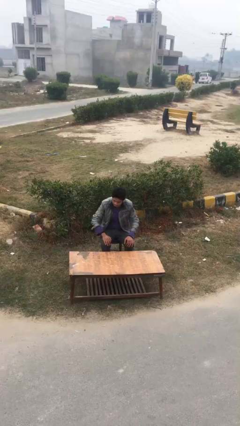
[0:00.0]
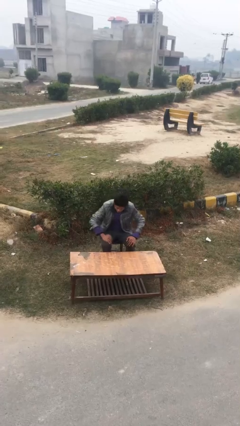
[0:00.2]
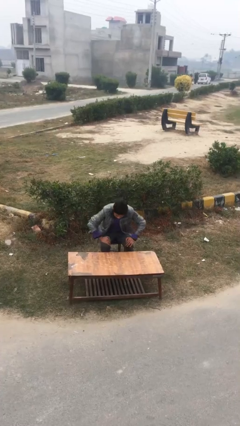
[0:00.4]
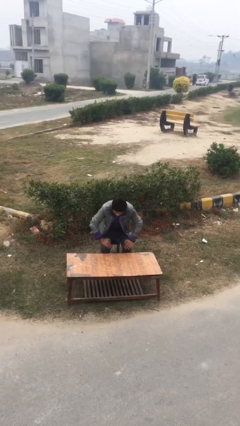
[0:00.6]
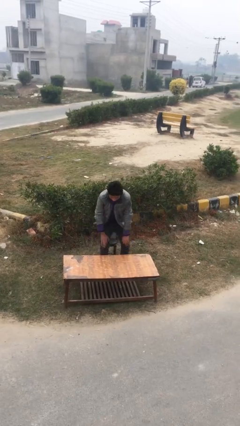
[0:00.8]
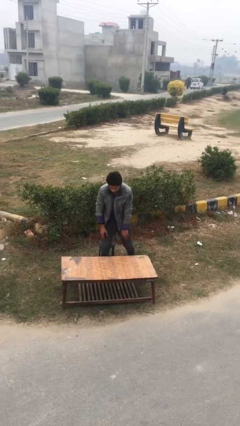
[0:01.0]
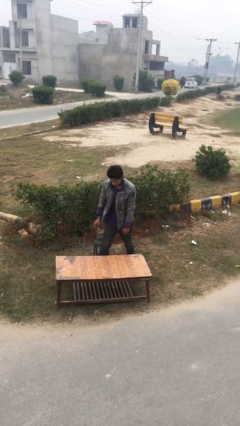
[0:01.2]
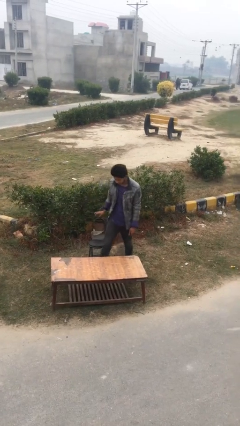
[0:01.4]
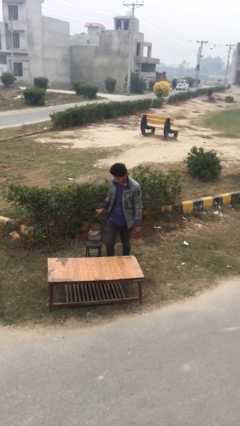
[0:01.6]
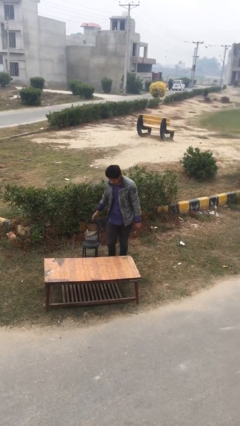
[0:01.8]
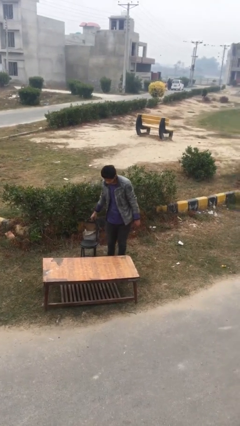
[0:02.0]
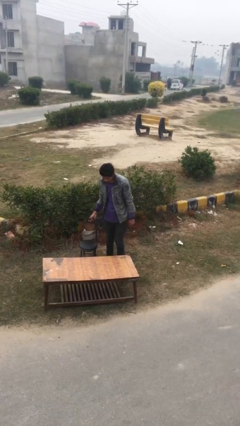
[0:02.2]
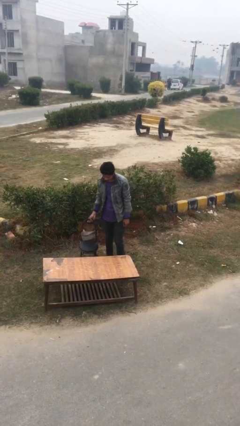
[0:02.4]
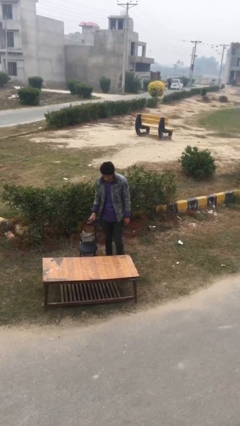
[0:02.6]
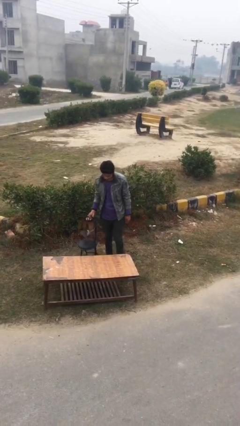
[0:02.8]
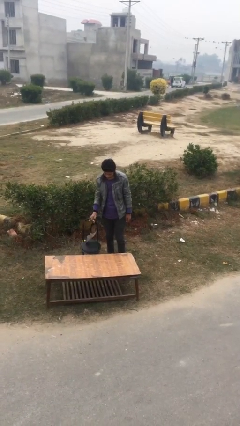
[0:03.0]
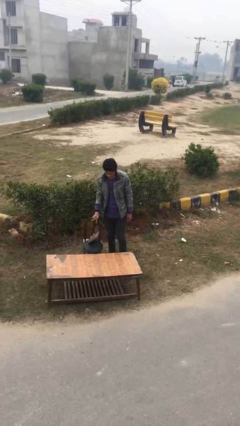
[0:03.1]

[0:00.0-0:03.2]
person stands up

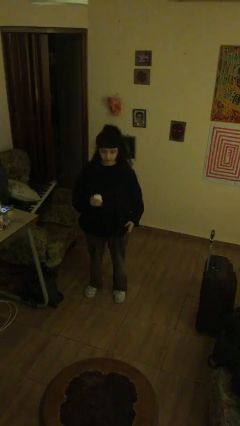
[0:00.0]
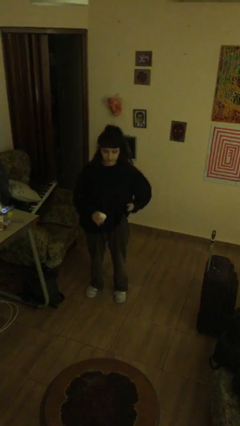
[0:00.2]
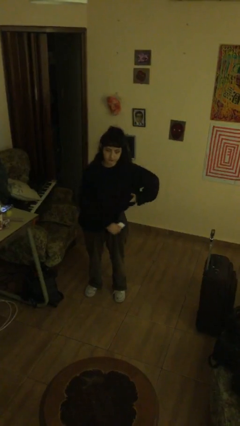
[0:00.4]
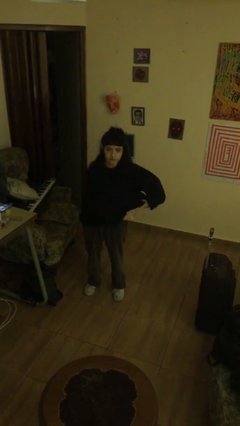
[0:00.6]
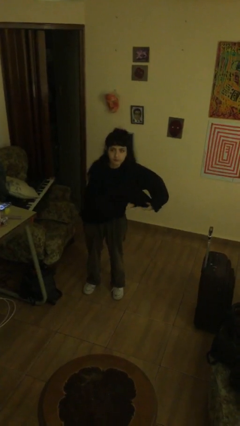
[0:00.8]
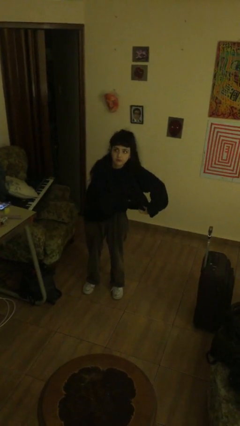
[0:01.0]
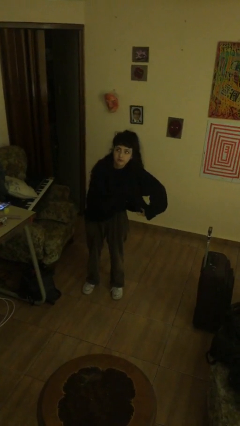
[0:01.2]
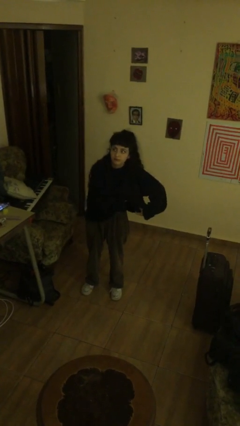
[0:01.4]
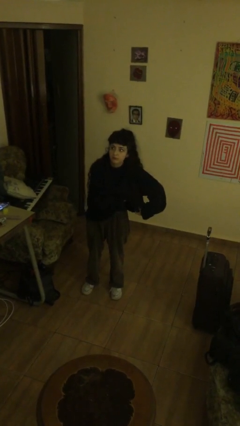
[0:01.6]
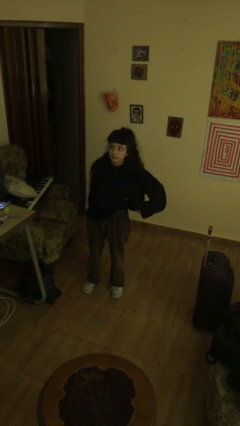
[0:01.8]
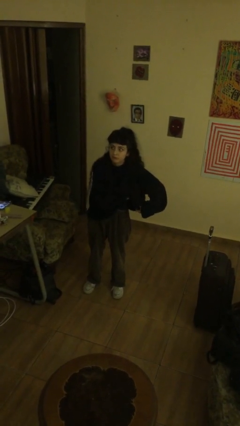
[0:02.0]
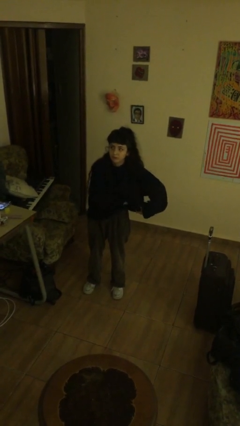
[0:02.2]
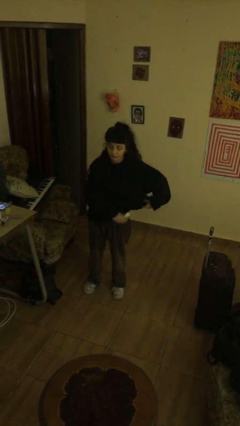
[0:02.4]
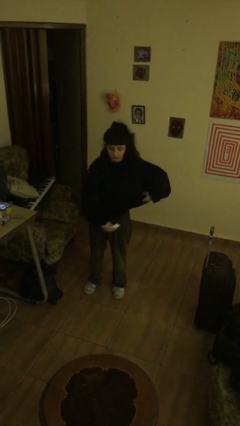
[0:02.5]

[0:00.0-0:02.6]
person applies deodorant

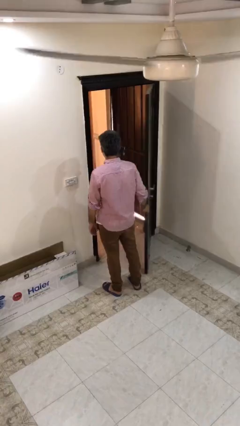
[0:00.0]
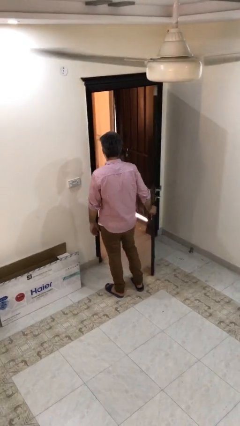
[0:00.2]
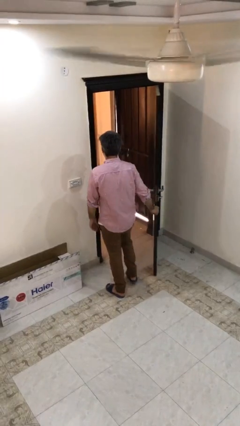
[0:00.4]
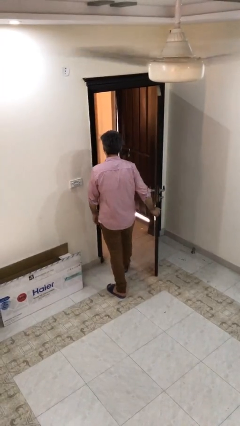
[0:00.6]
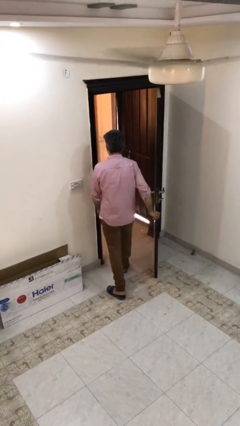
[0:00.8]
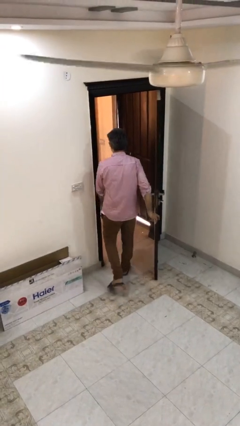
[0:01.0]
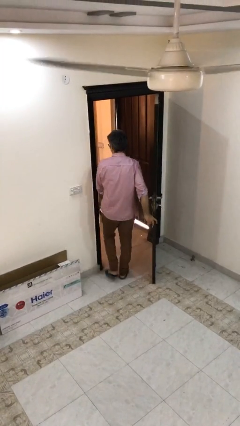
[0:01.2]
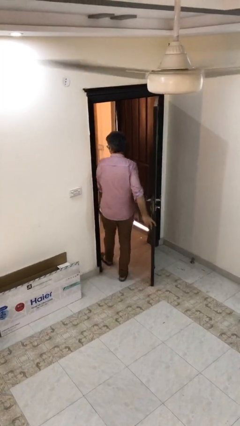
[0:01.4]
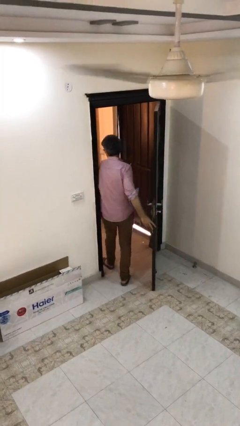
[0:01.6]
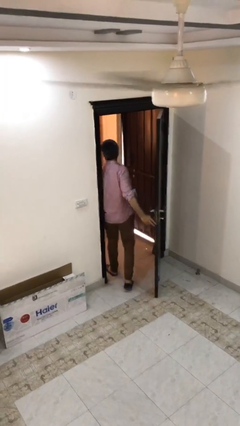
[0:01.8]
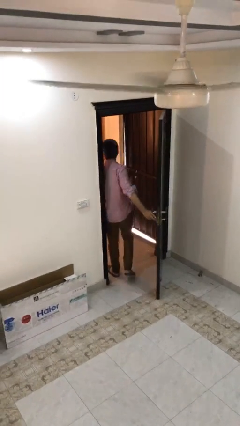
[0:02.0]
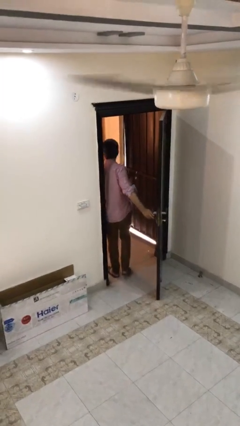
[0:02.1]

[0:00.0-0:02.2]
person exits scene through structure

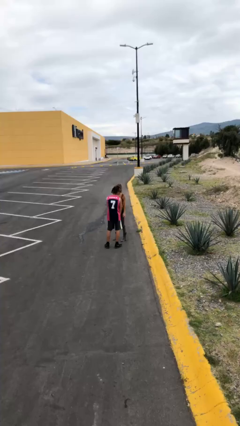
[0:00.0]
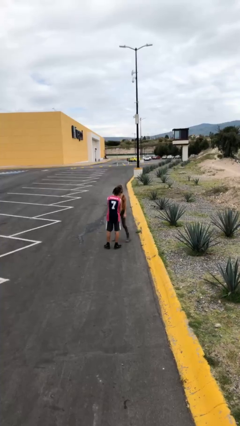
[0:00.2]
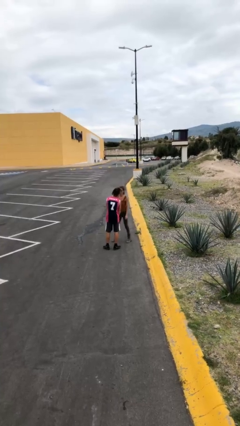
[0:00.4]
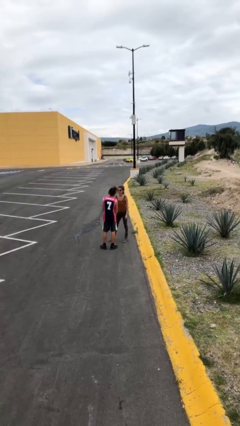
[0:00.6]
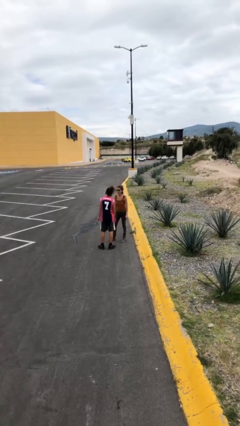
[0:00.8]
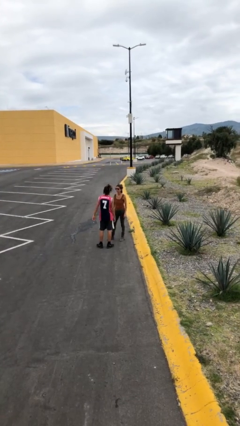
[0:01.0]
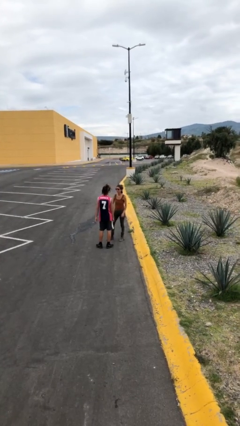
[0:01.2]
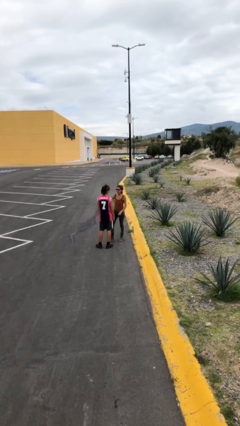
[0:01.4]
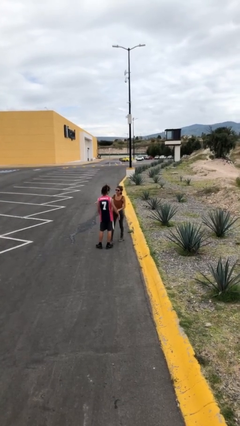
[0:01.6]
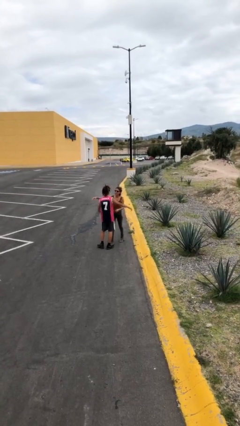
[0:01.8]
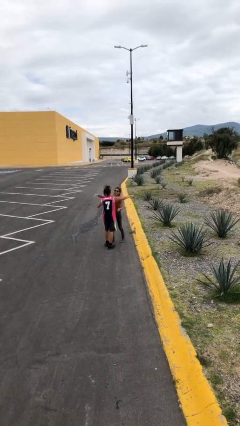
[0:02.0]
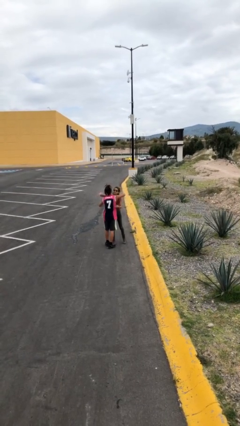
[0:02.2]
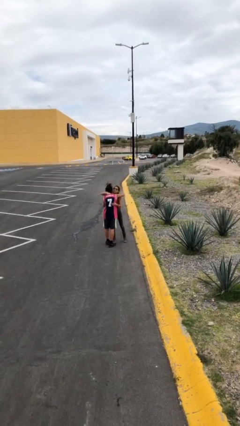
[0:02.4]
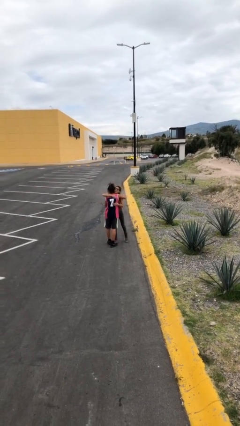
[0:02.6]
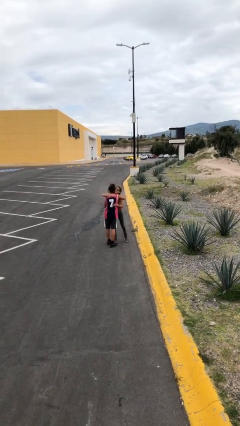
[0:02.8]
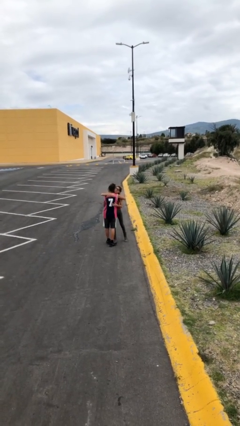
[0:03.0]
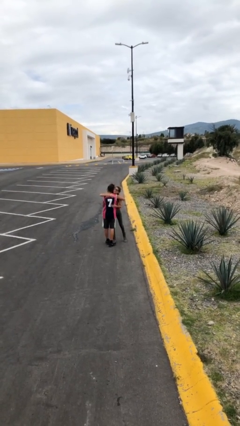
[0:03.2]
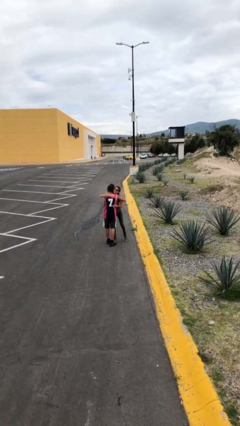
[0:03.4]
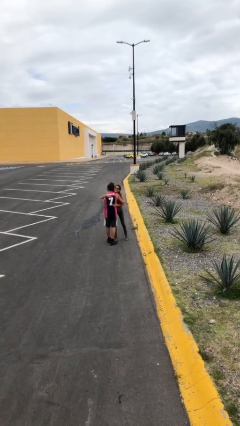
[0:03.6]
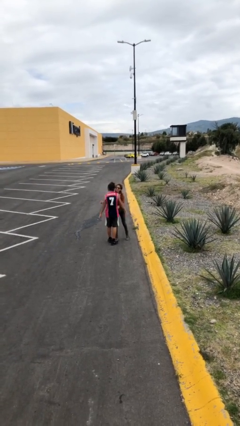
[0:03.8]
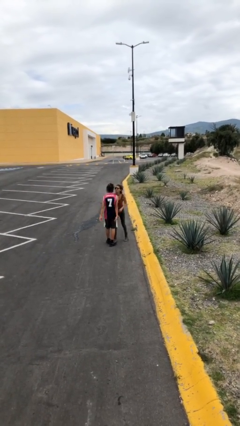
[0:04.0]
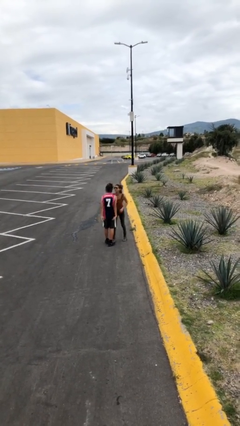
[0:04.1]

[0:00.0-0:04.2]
person embraces person

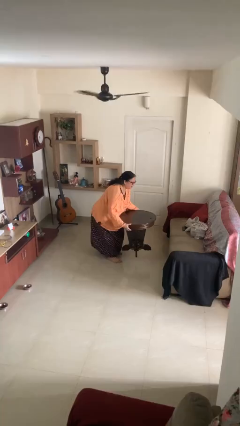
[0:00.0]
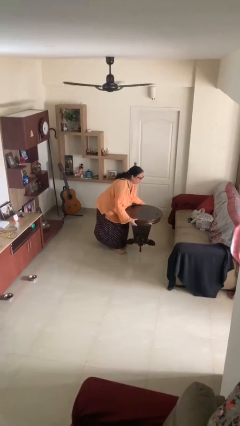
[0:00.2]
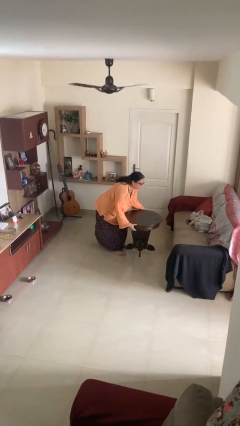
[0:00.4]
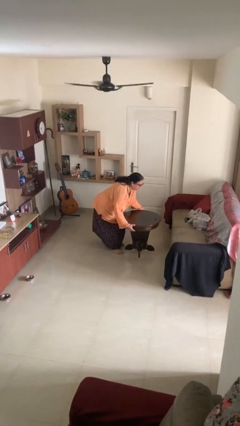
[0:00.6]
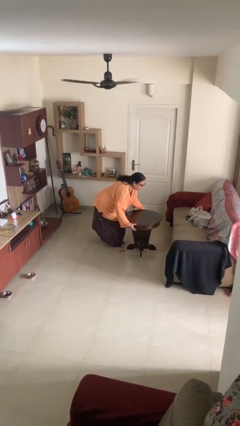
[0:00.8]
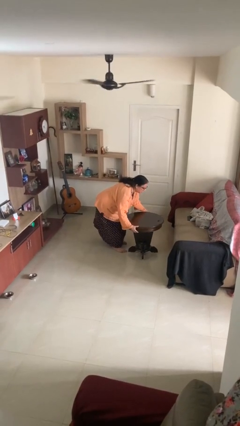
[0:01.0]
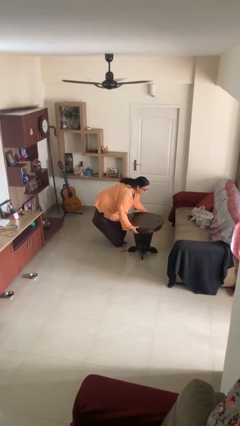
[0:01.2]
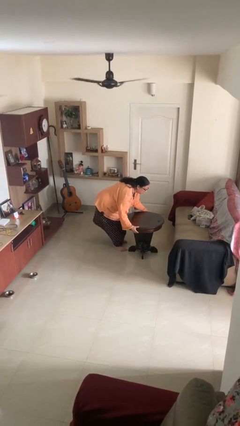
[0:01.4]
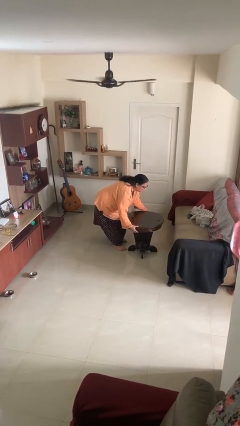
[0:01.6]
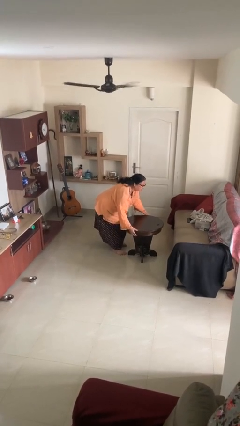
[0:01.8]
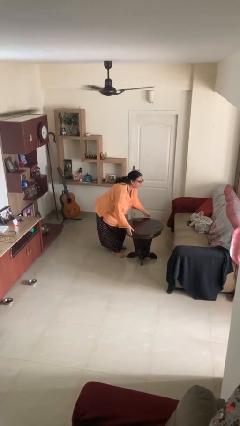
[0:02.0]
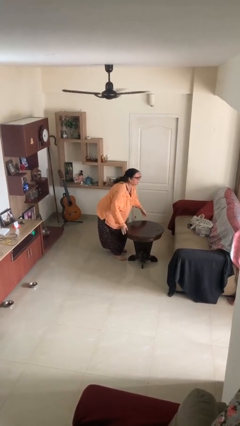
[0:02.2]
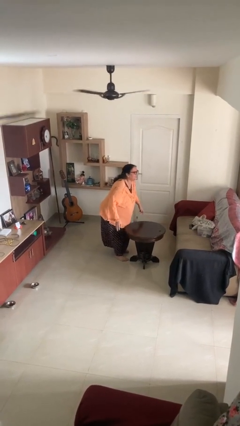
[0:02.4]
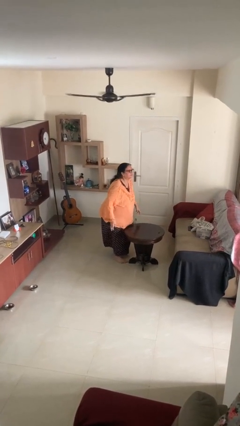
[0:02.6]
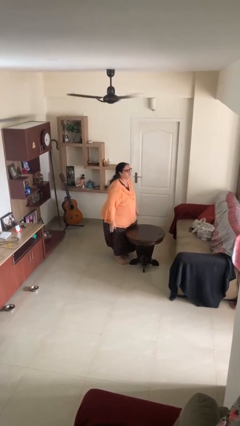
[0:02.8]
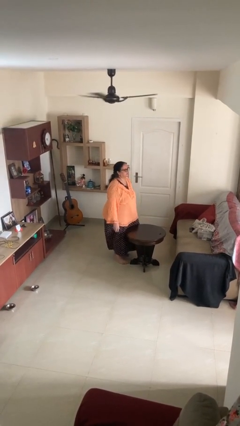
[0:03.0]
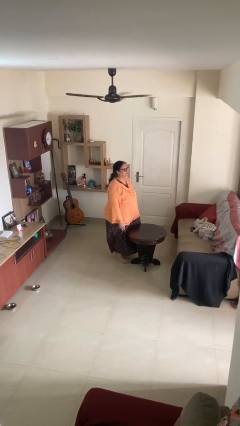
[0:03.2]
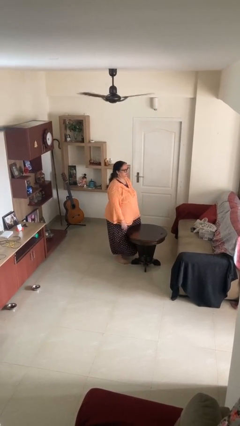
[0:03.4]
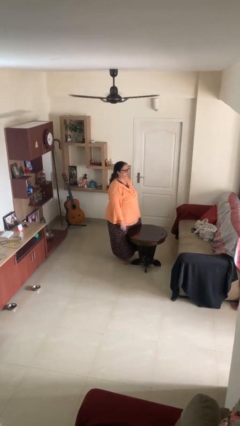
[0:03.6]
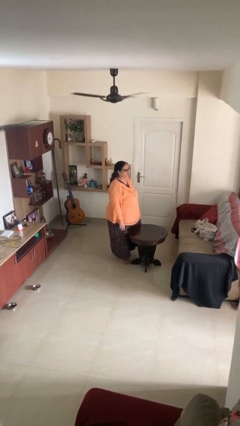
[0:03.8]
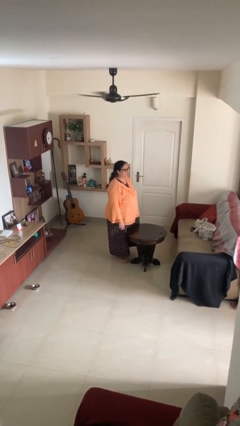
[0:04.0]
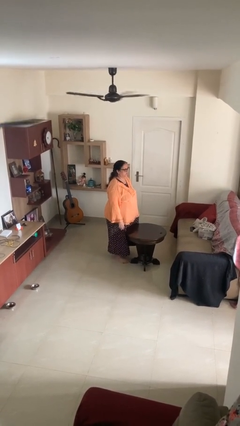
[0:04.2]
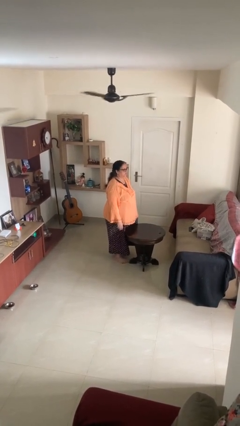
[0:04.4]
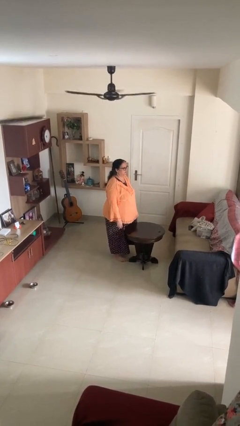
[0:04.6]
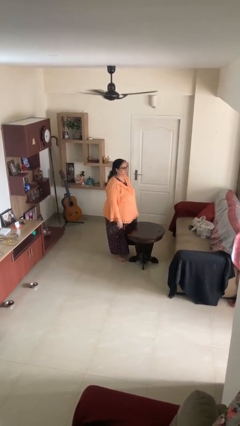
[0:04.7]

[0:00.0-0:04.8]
person puts down object on floor

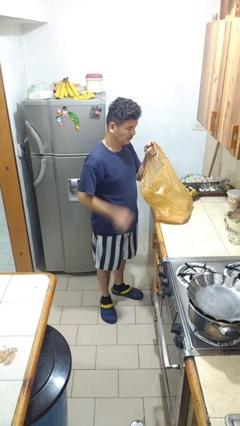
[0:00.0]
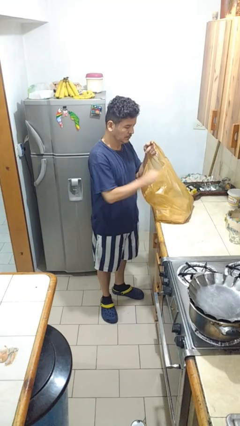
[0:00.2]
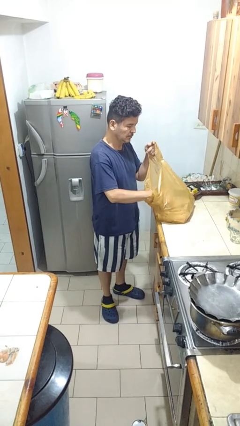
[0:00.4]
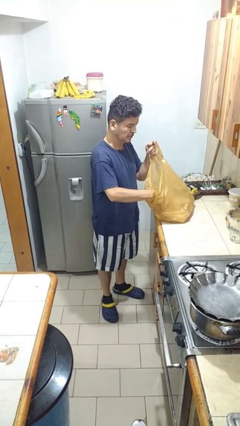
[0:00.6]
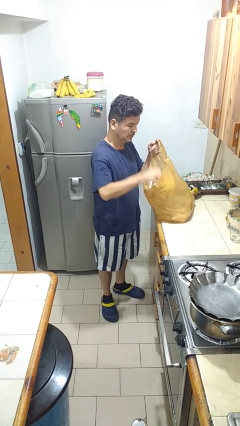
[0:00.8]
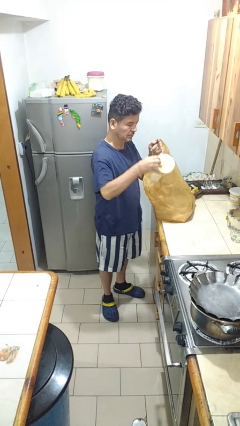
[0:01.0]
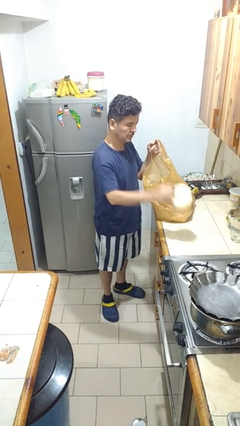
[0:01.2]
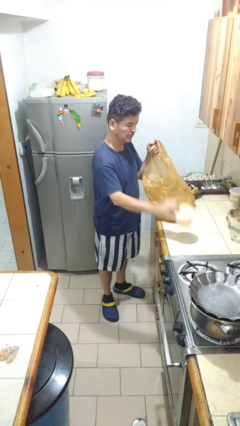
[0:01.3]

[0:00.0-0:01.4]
person takes object from bag
